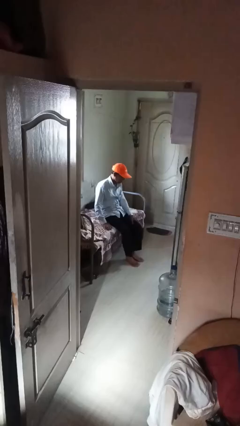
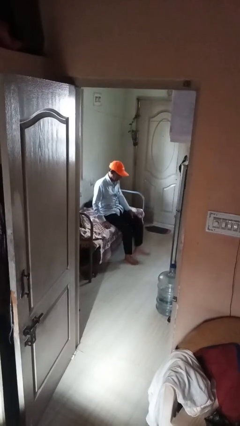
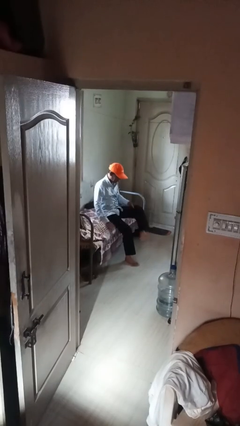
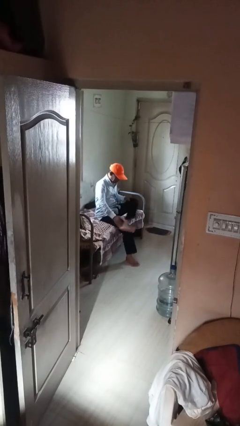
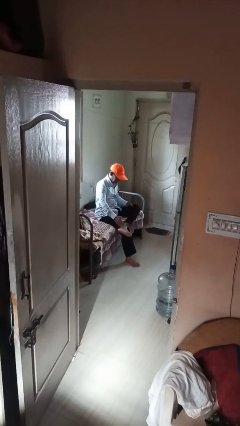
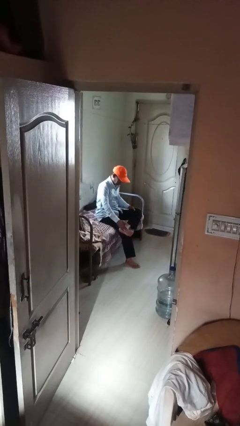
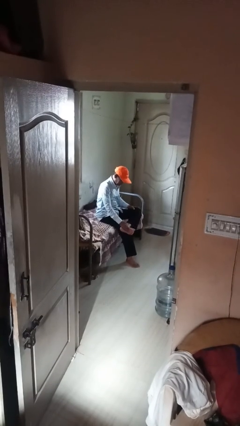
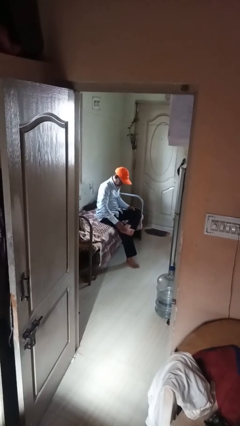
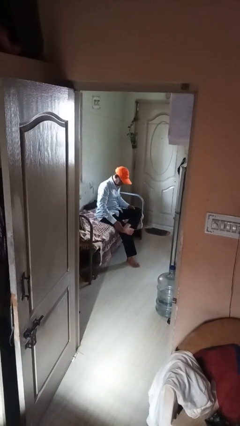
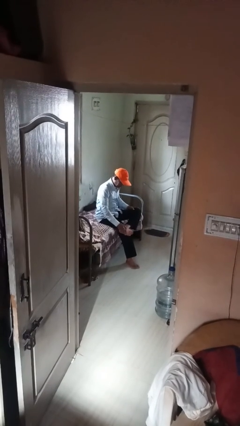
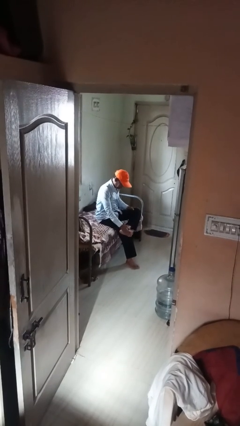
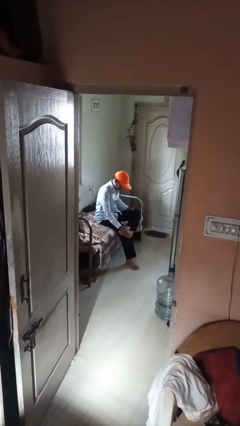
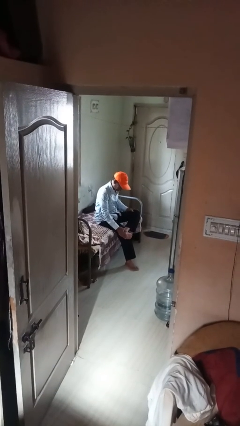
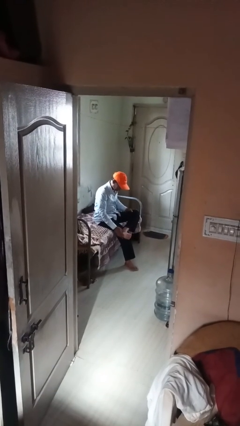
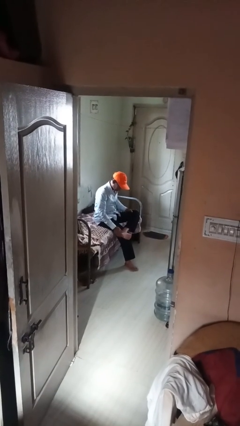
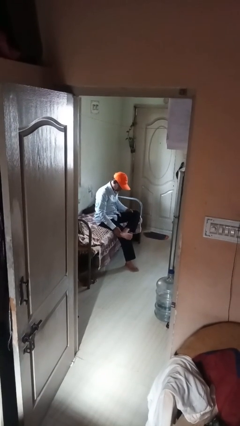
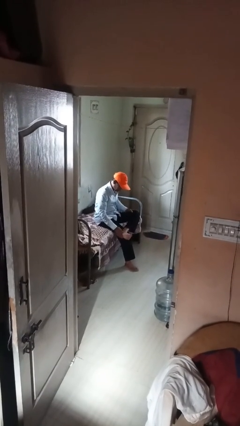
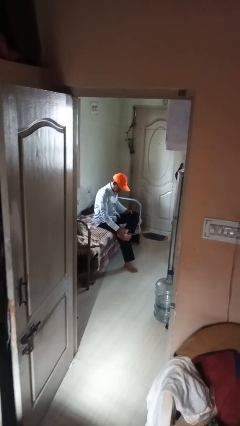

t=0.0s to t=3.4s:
person rubs foot

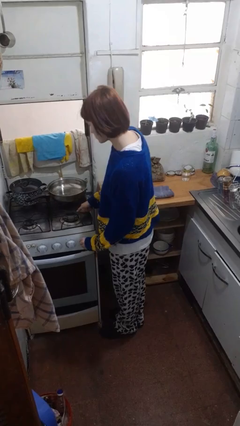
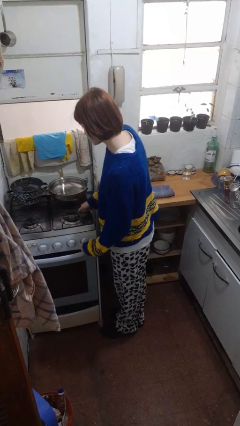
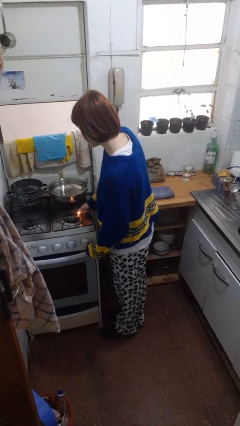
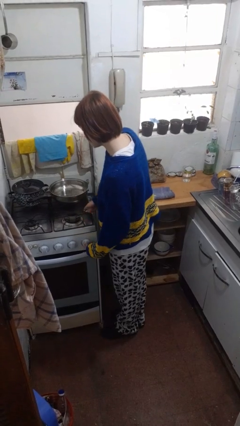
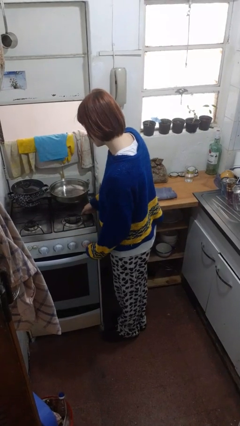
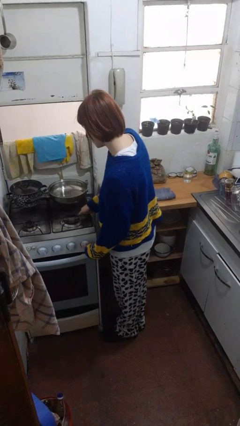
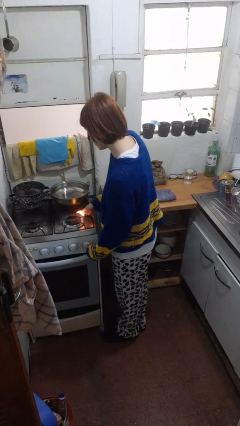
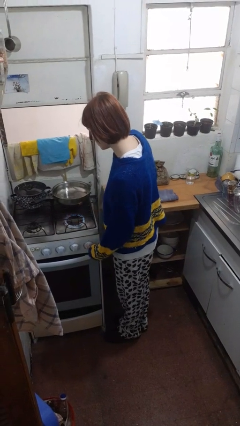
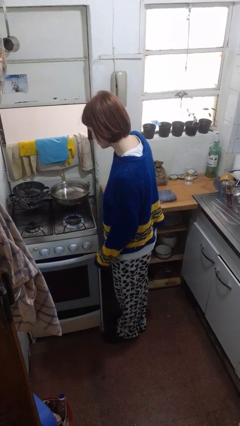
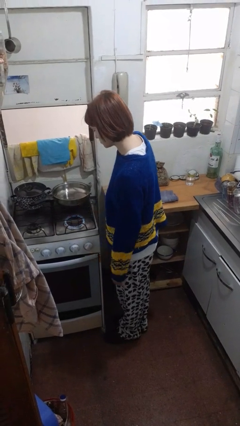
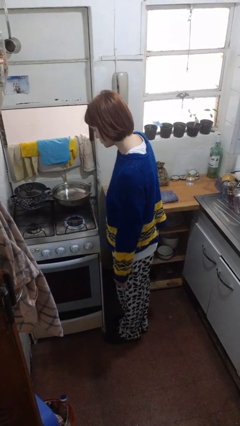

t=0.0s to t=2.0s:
person turns on stovetop

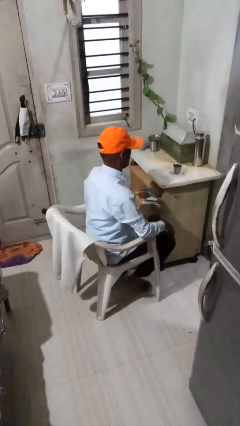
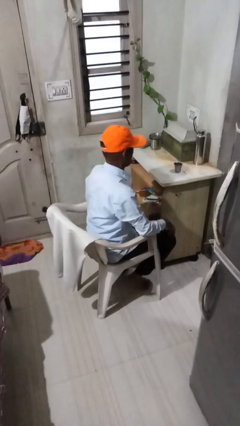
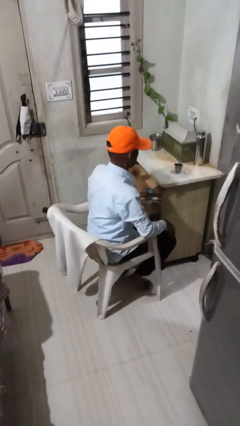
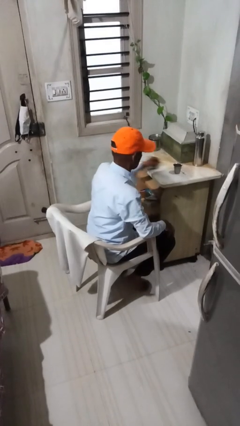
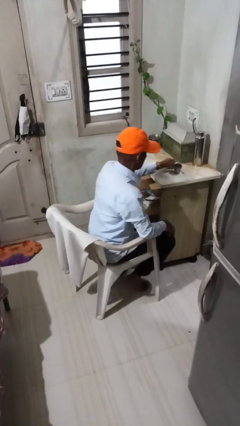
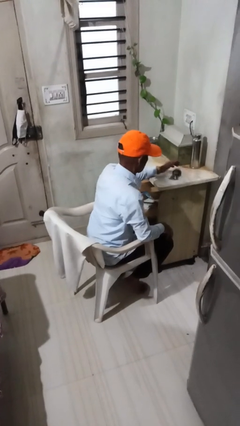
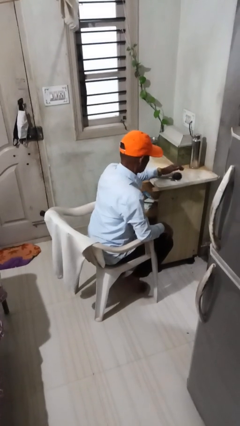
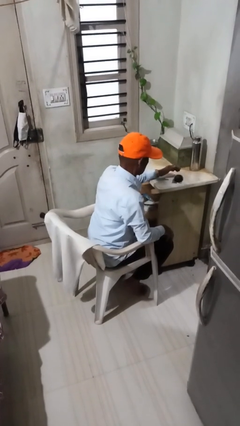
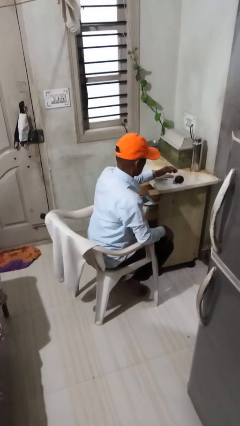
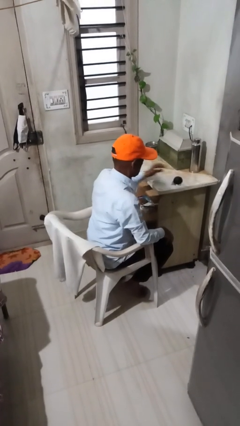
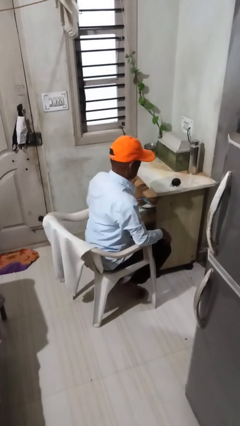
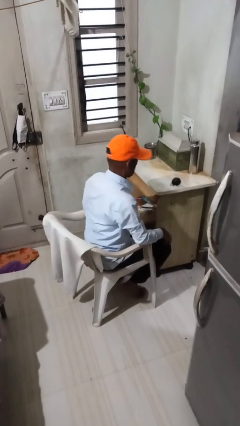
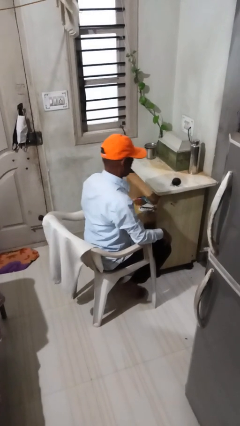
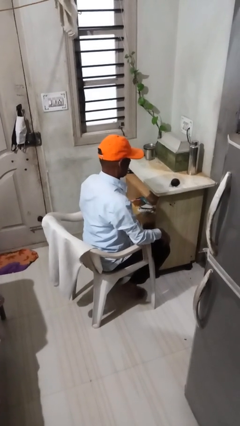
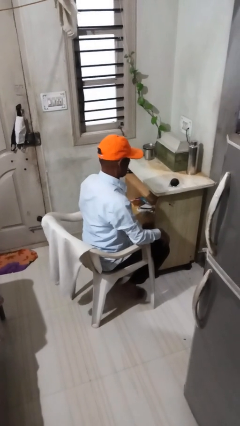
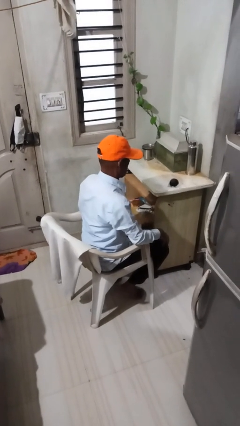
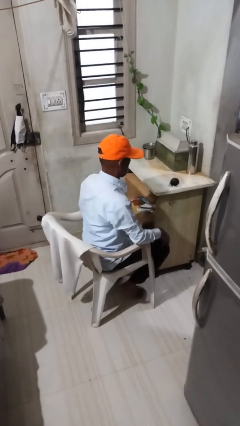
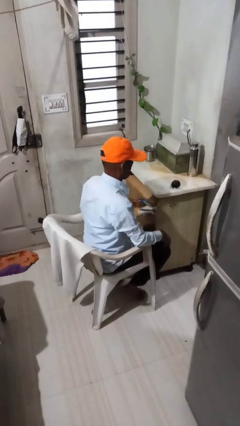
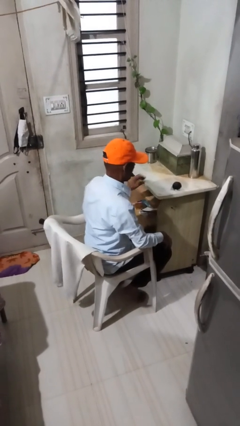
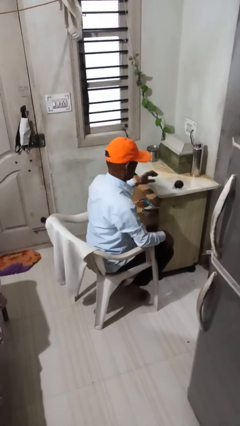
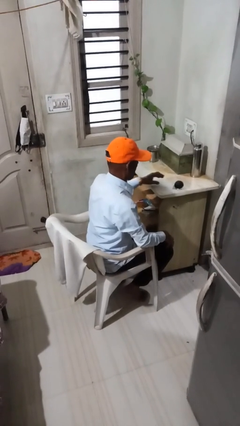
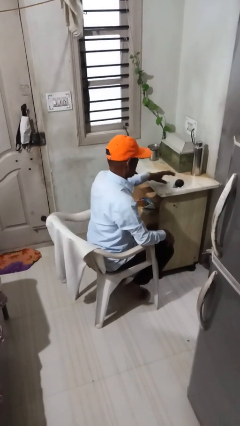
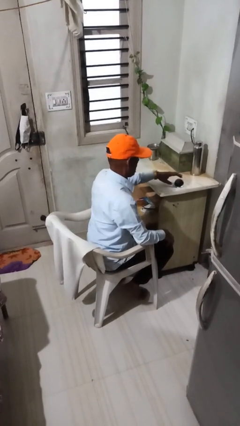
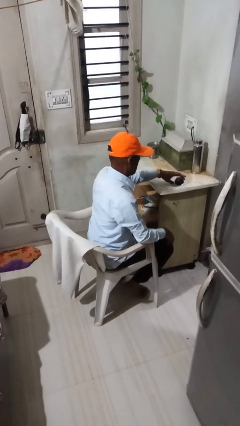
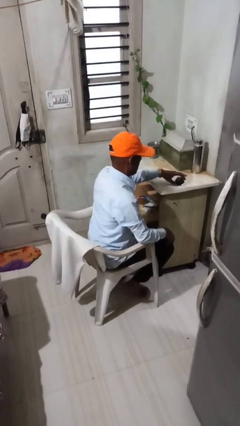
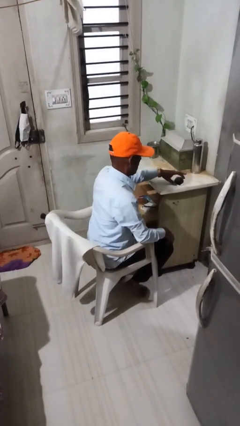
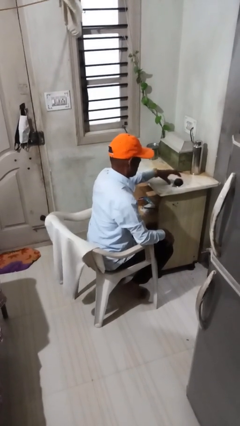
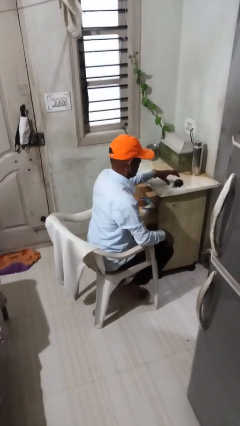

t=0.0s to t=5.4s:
person knocks over glass

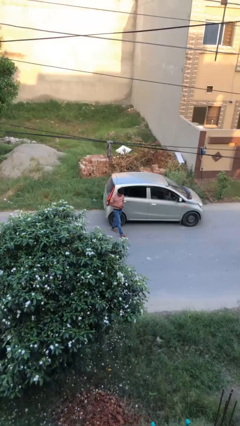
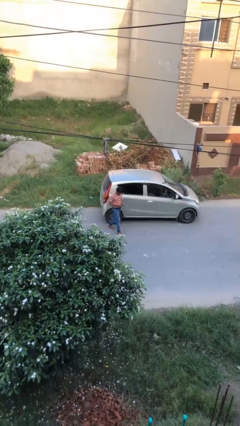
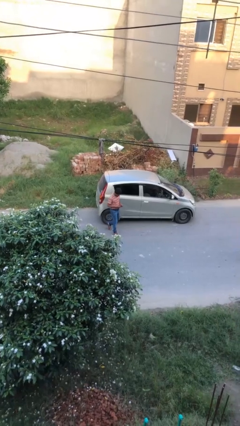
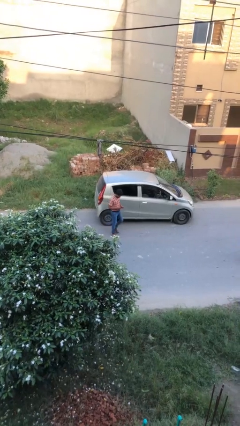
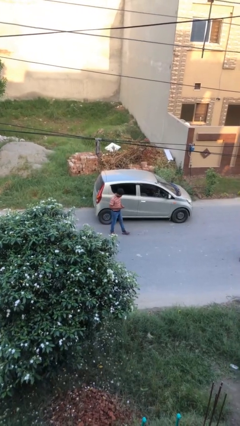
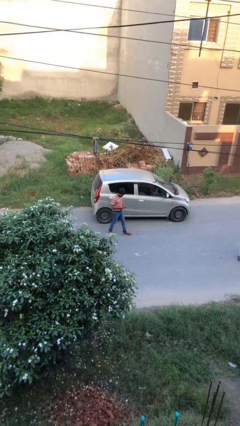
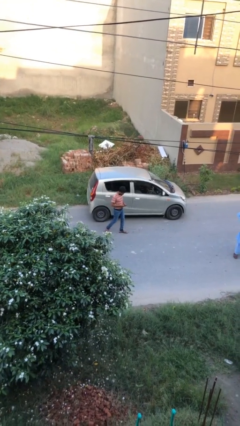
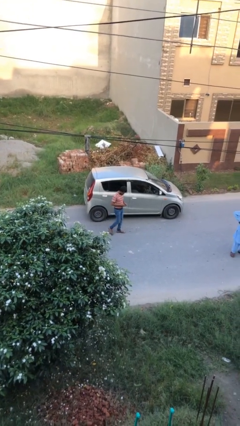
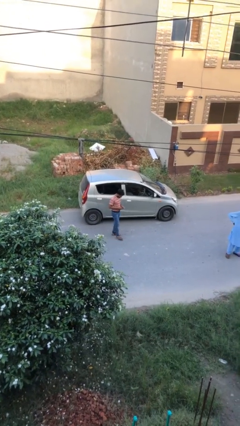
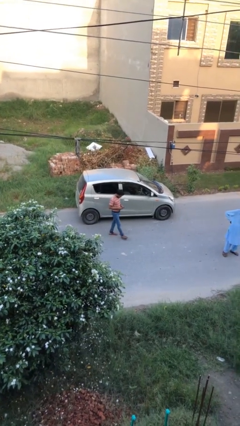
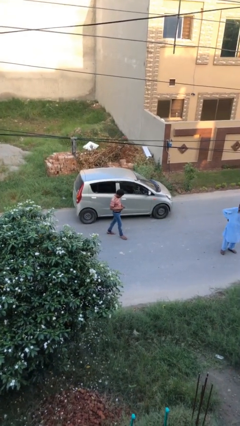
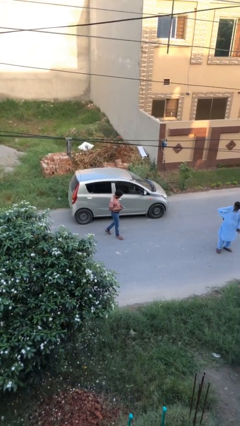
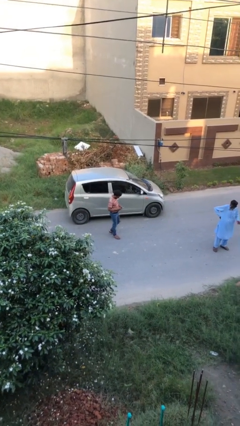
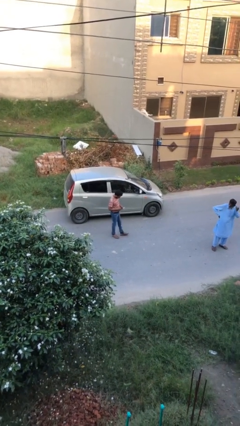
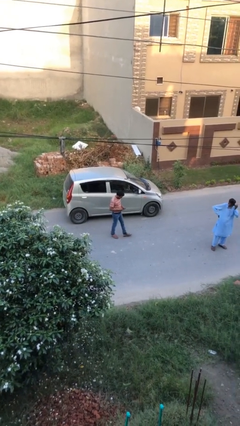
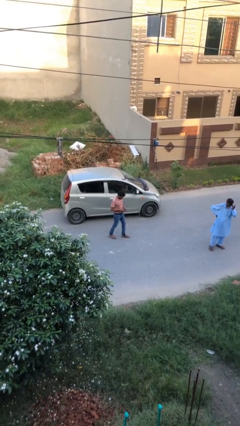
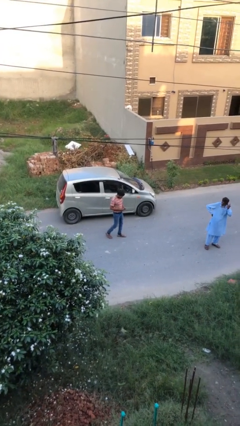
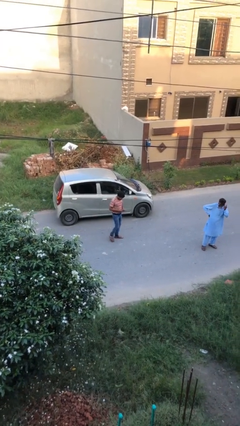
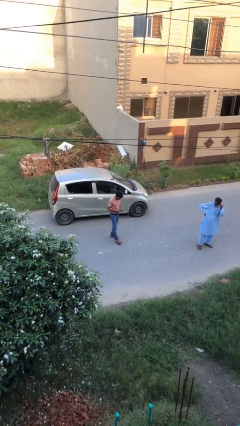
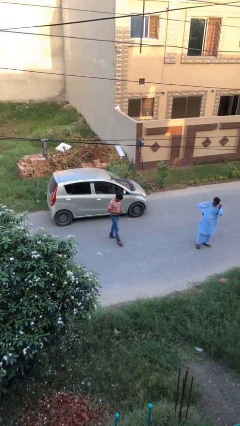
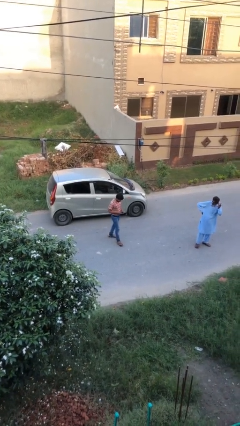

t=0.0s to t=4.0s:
person texts on phone

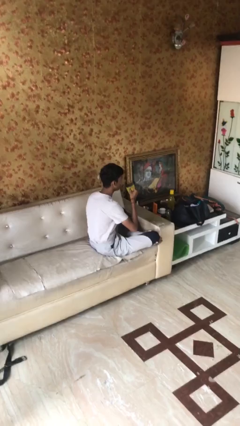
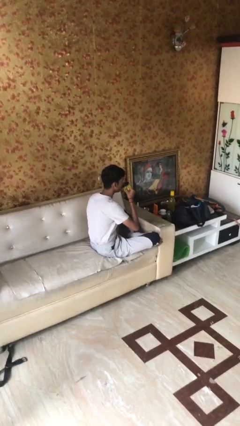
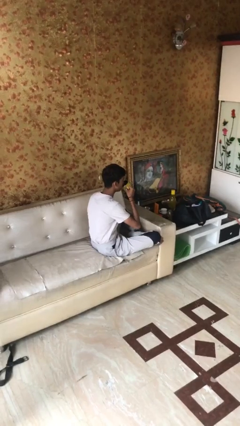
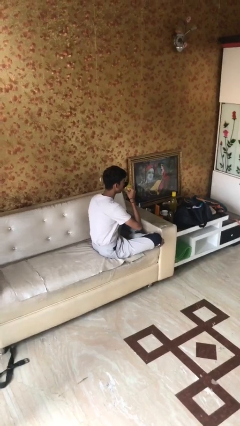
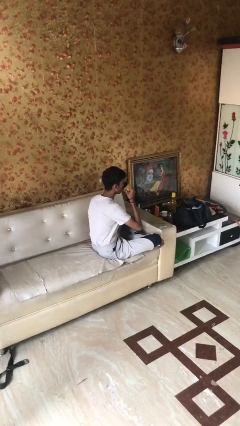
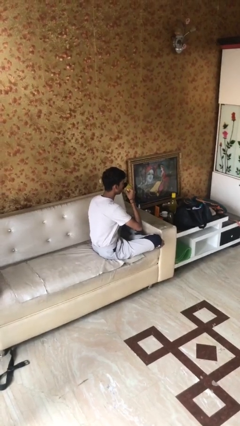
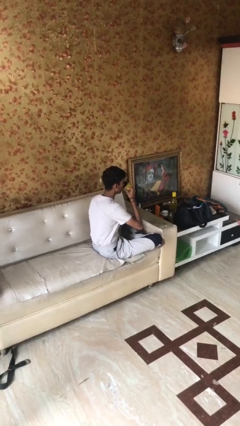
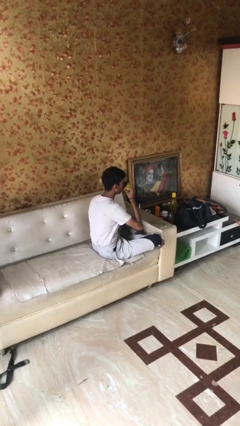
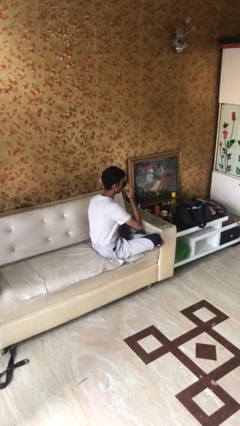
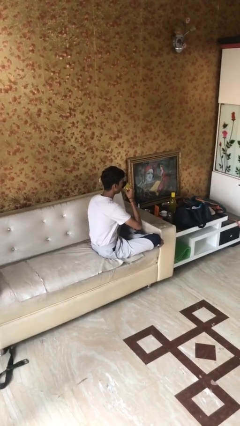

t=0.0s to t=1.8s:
person drinks from mug

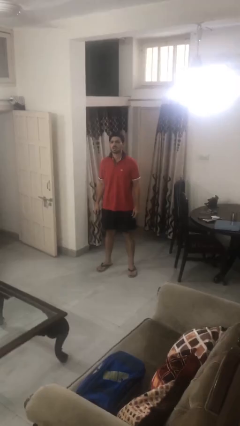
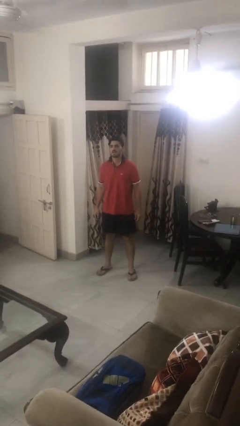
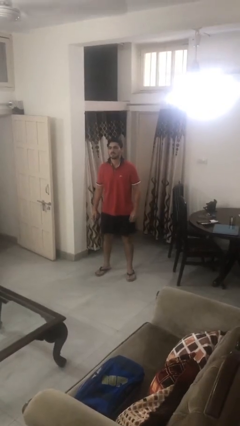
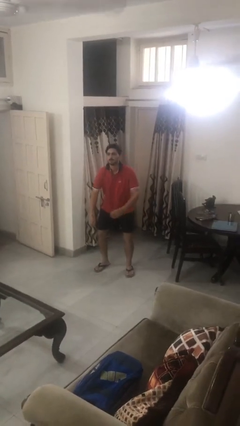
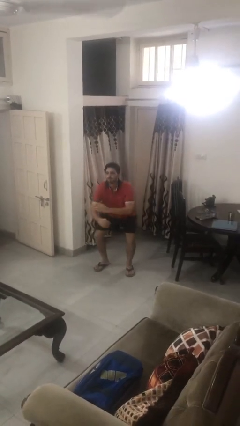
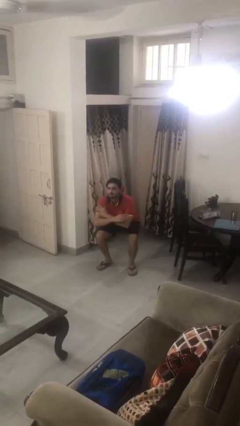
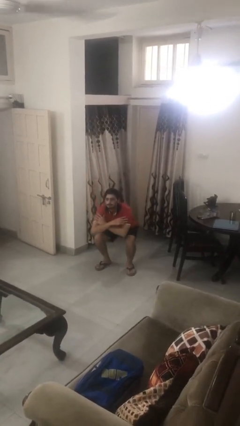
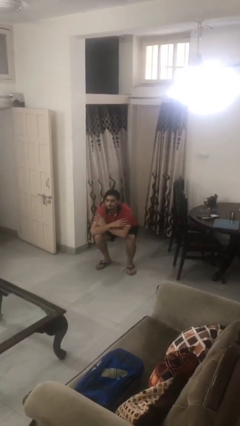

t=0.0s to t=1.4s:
person squats
